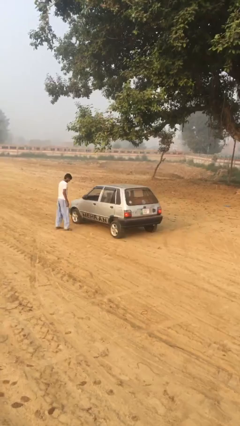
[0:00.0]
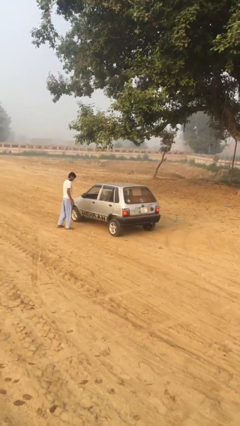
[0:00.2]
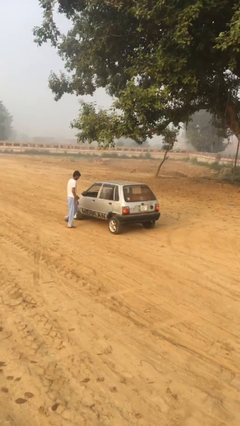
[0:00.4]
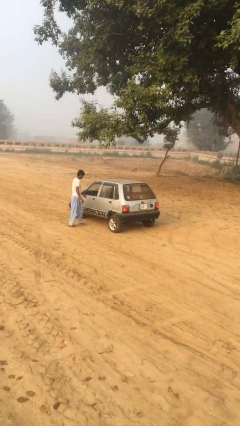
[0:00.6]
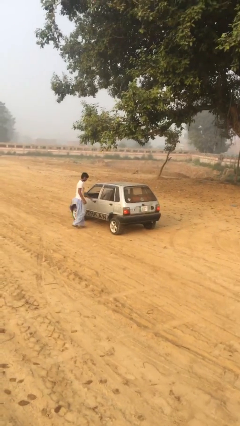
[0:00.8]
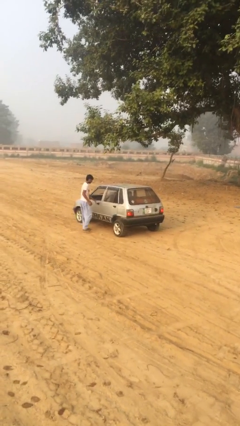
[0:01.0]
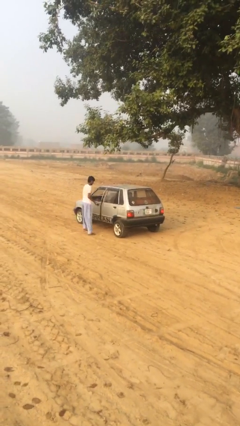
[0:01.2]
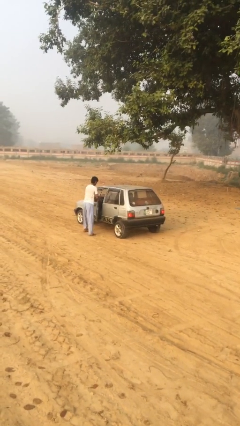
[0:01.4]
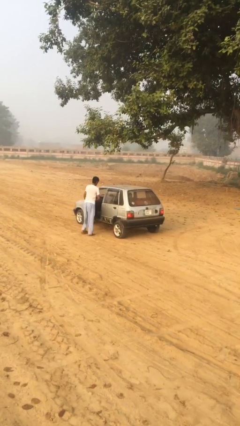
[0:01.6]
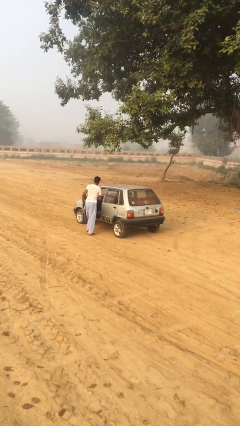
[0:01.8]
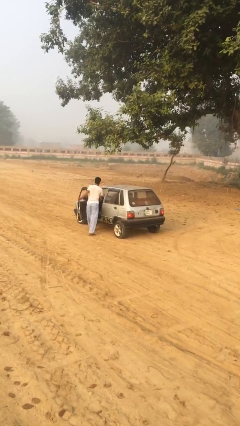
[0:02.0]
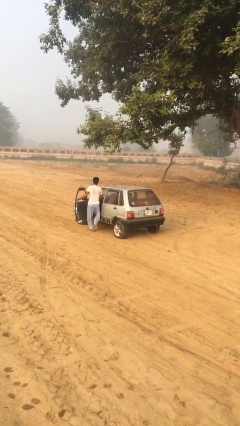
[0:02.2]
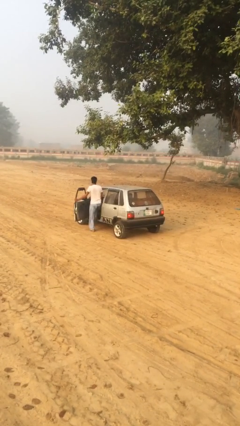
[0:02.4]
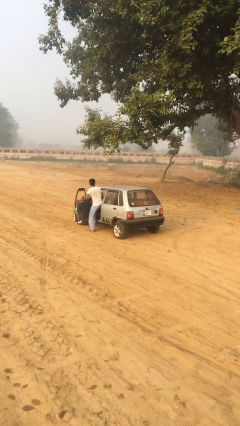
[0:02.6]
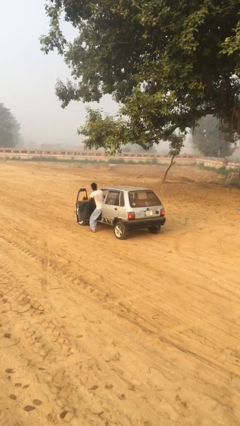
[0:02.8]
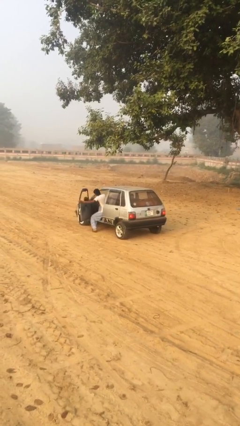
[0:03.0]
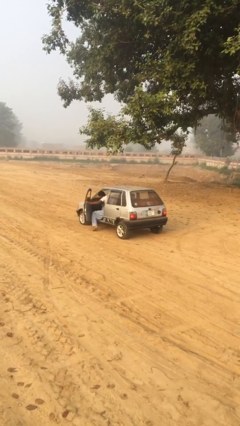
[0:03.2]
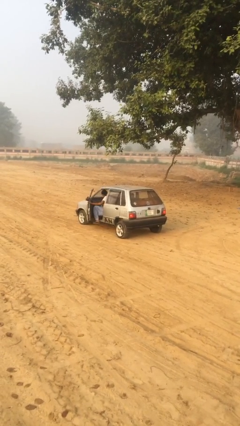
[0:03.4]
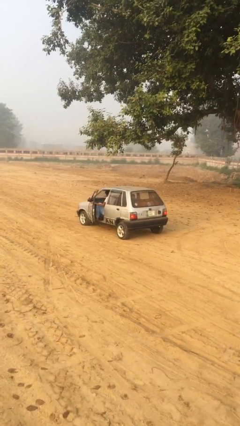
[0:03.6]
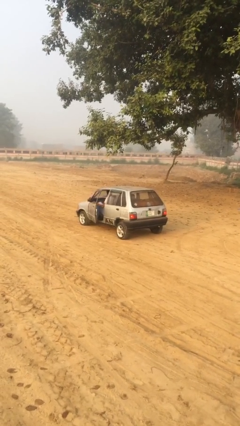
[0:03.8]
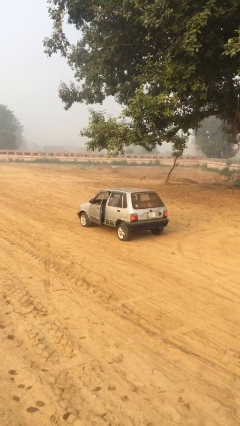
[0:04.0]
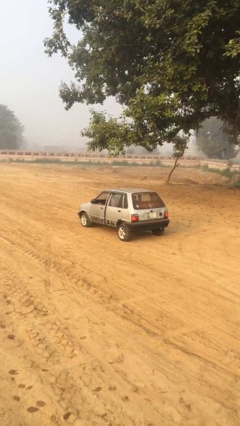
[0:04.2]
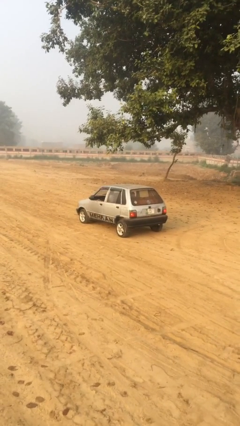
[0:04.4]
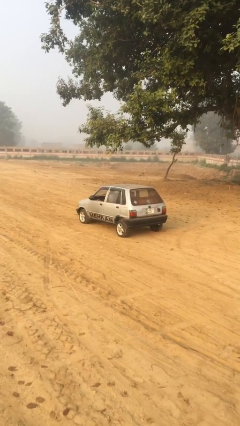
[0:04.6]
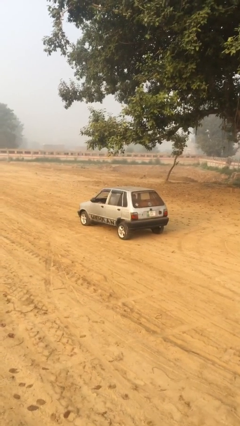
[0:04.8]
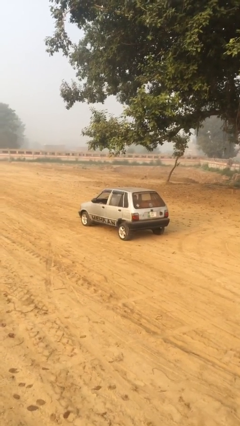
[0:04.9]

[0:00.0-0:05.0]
car picks up person

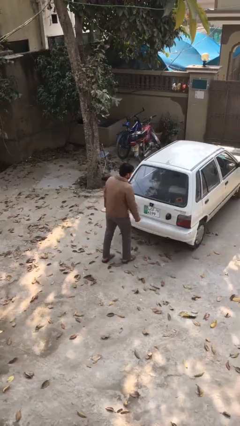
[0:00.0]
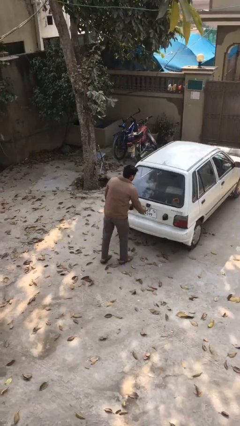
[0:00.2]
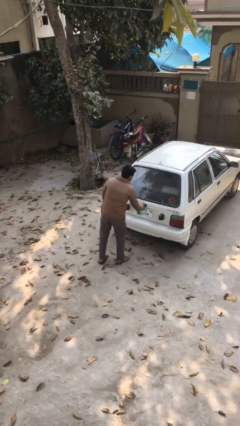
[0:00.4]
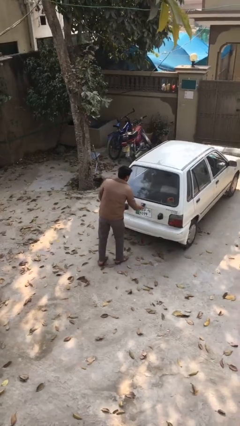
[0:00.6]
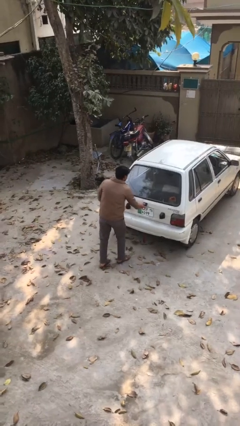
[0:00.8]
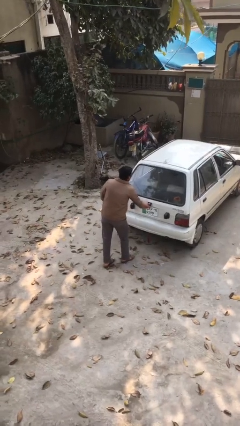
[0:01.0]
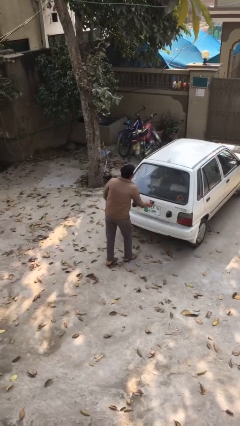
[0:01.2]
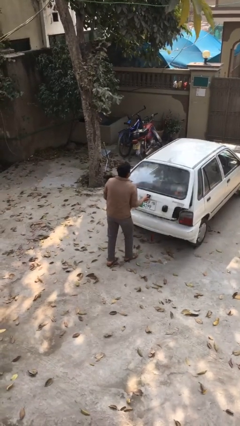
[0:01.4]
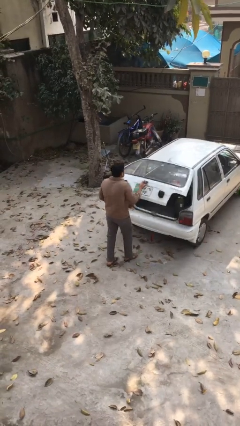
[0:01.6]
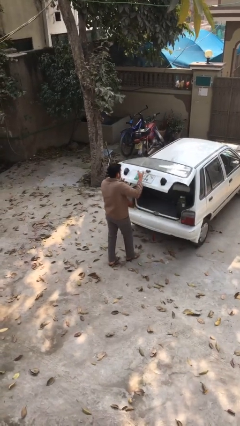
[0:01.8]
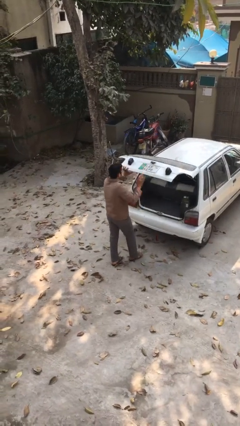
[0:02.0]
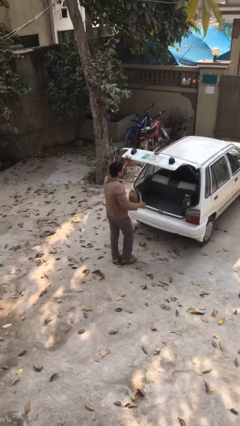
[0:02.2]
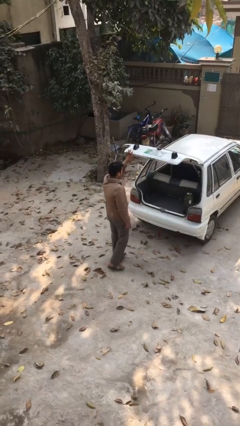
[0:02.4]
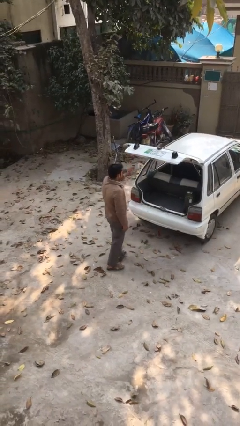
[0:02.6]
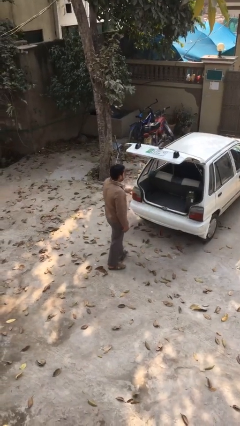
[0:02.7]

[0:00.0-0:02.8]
person opens car trunk

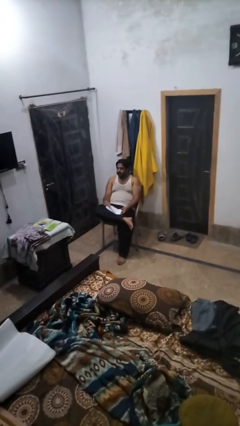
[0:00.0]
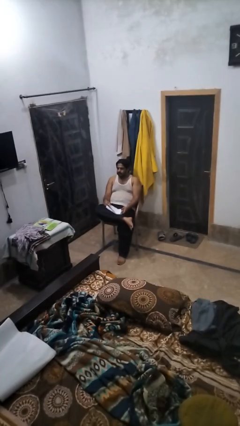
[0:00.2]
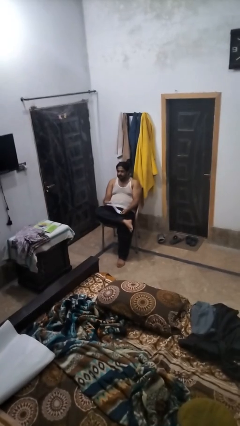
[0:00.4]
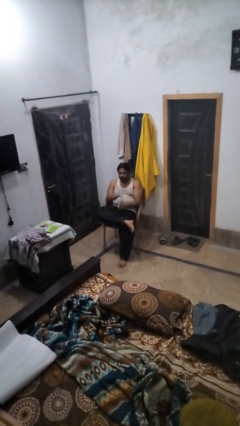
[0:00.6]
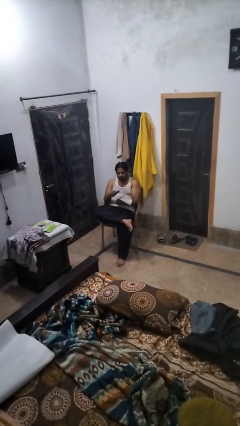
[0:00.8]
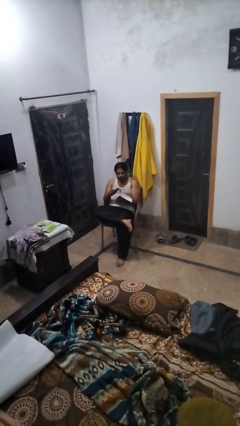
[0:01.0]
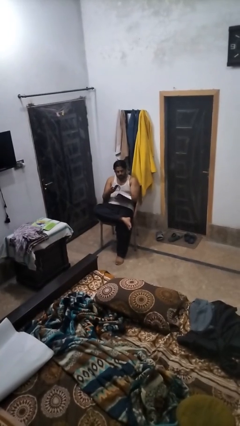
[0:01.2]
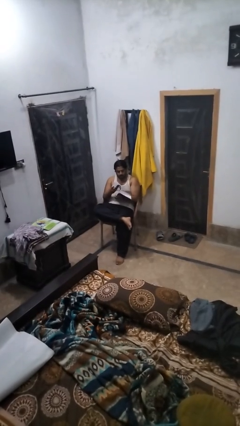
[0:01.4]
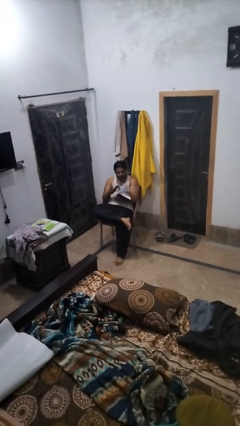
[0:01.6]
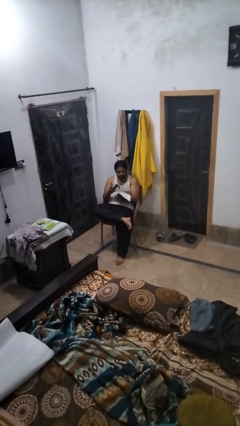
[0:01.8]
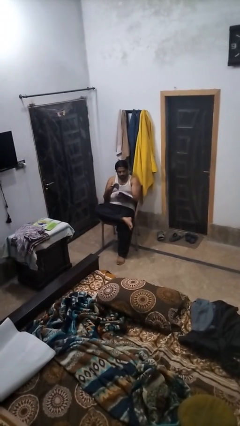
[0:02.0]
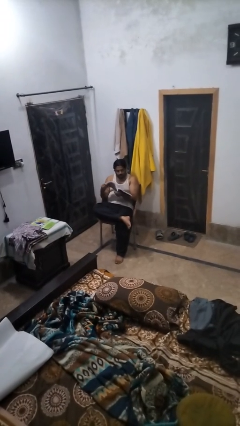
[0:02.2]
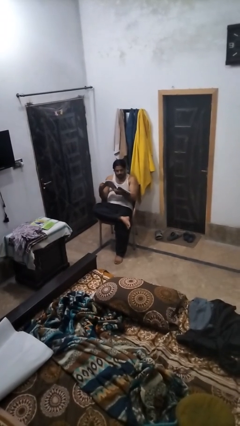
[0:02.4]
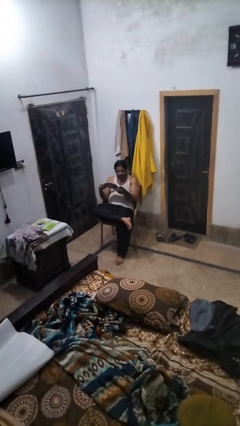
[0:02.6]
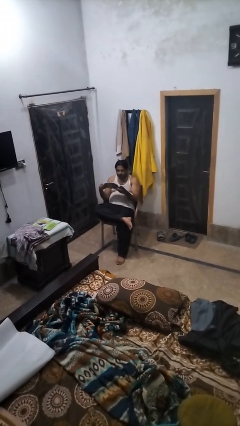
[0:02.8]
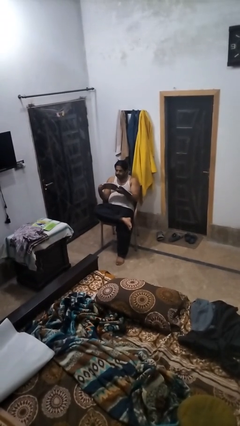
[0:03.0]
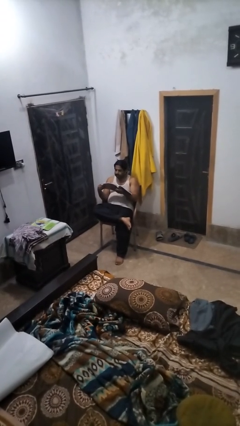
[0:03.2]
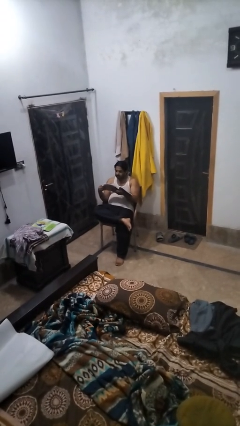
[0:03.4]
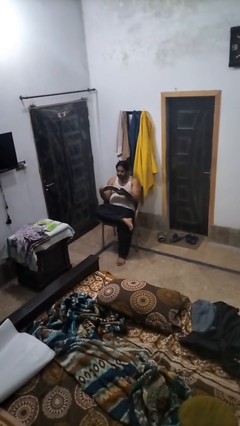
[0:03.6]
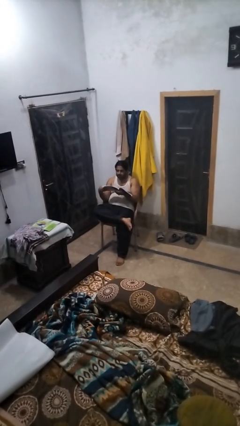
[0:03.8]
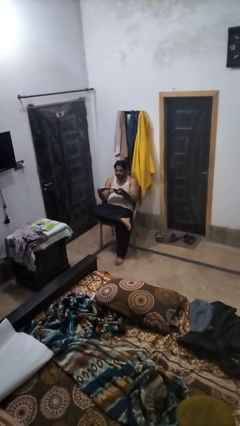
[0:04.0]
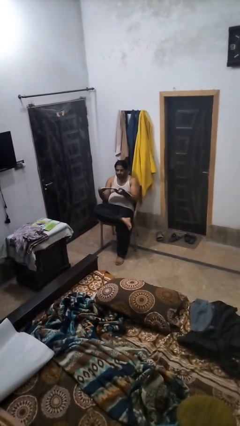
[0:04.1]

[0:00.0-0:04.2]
person reads book

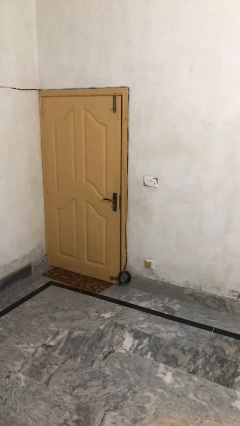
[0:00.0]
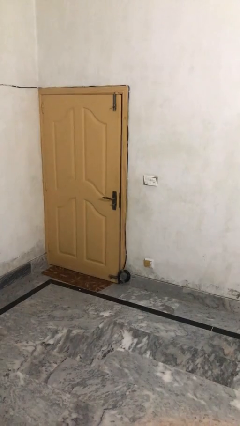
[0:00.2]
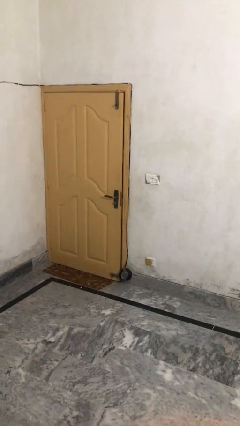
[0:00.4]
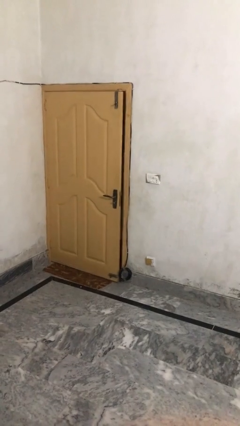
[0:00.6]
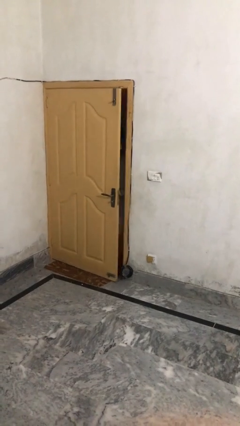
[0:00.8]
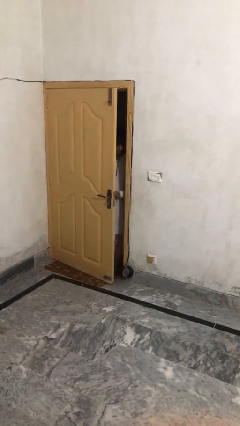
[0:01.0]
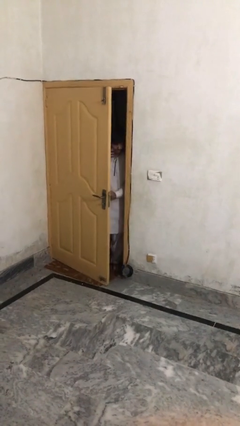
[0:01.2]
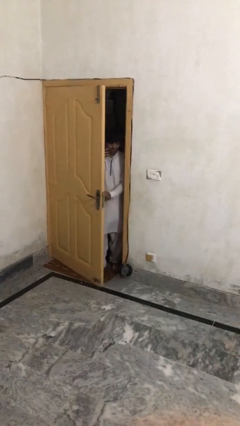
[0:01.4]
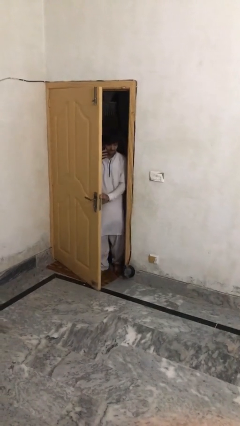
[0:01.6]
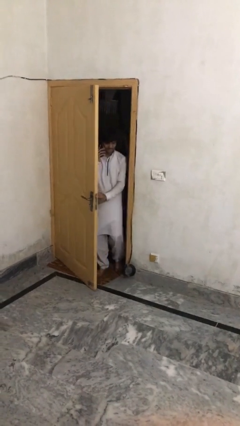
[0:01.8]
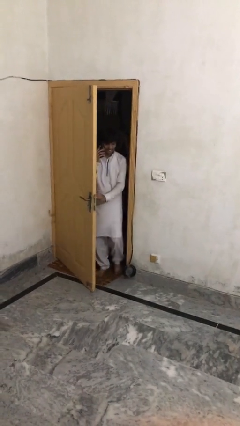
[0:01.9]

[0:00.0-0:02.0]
person opens facility door

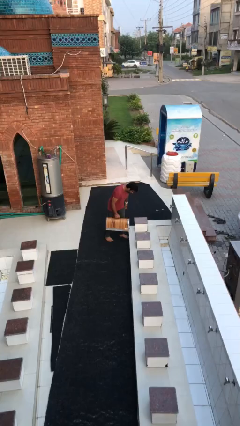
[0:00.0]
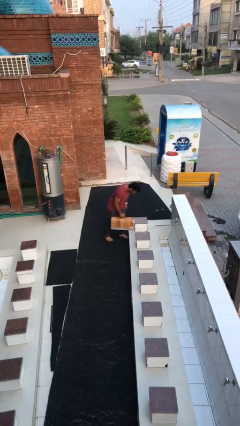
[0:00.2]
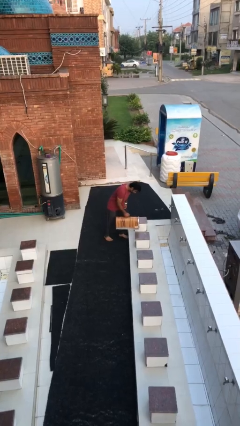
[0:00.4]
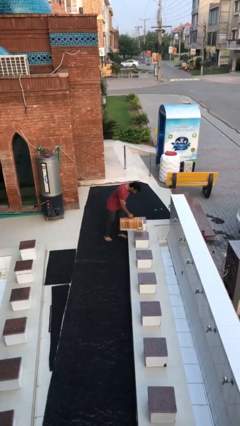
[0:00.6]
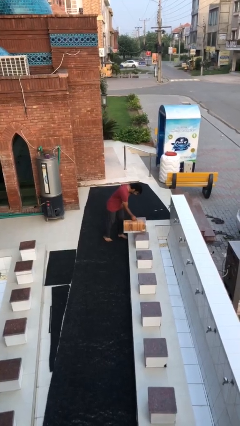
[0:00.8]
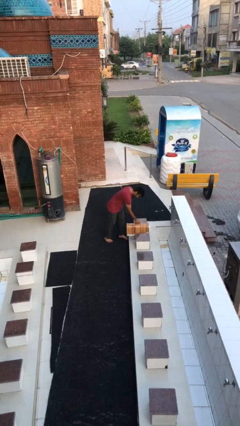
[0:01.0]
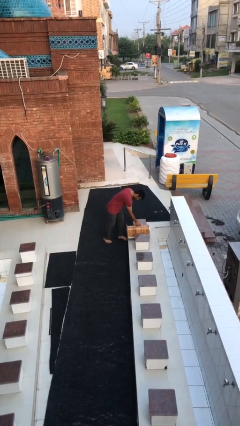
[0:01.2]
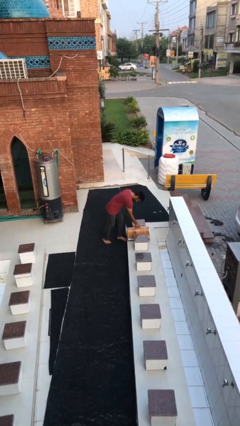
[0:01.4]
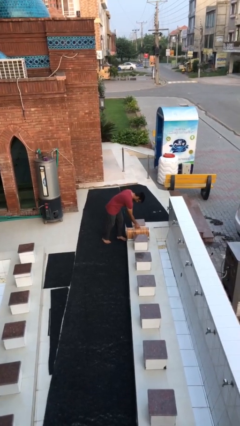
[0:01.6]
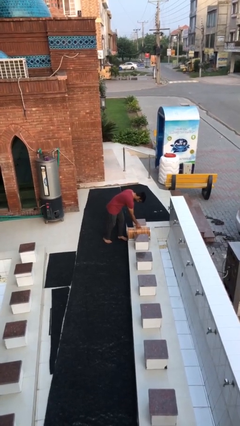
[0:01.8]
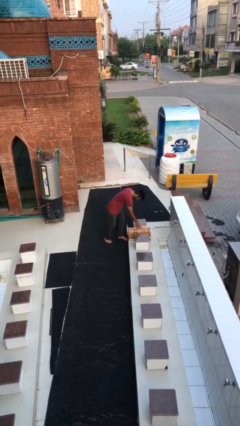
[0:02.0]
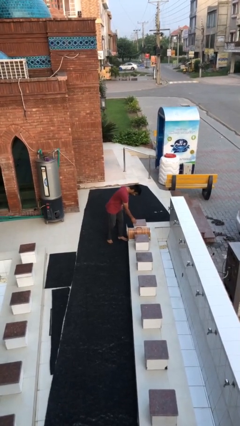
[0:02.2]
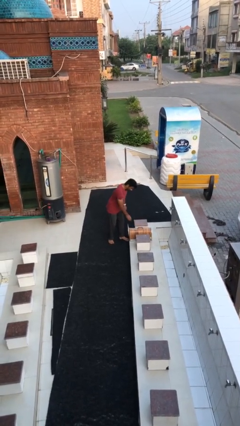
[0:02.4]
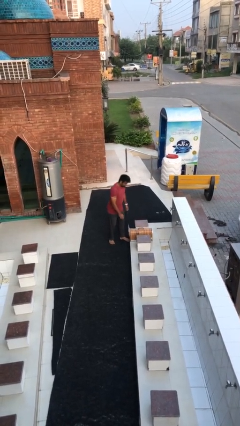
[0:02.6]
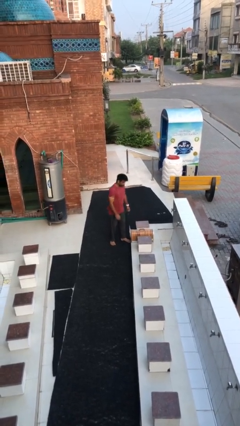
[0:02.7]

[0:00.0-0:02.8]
person puts down object on floor

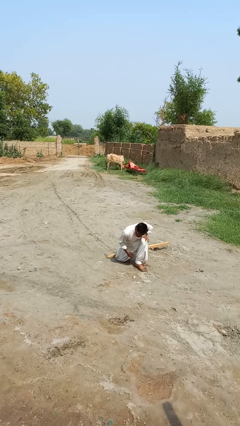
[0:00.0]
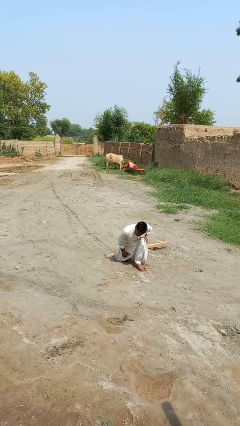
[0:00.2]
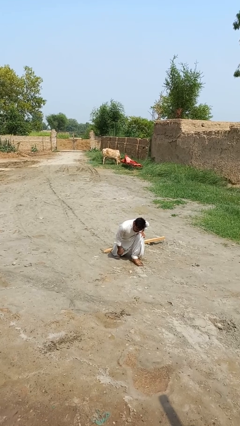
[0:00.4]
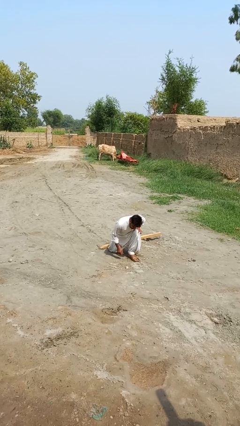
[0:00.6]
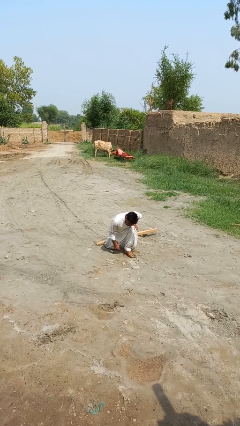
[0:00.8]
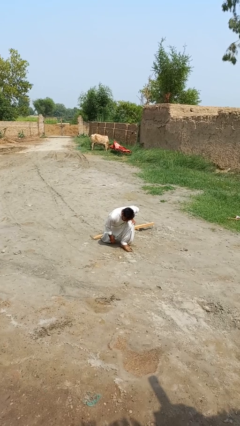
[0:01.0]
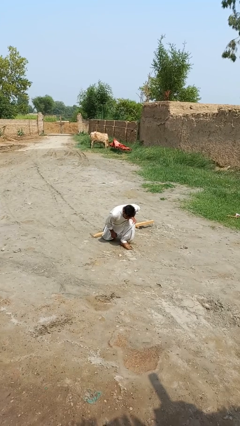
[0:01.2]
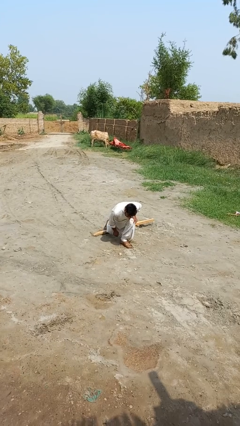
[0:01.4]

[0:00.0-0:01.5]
person trips on object on floor
